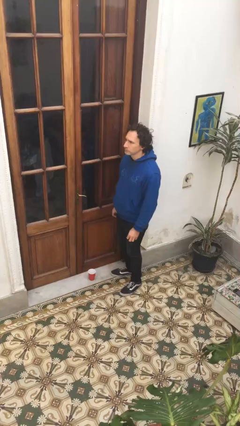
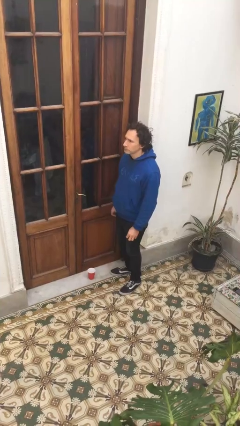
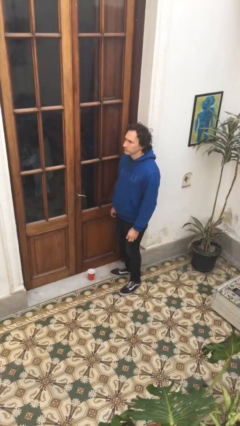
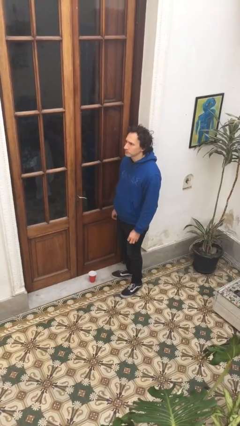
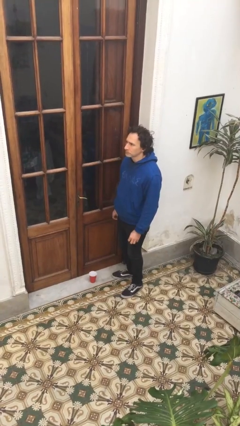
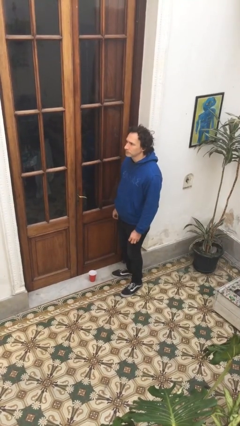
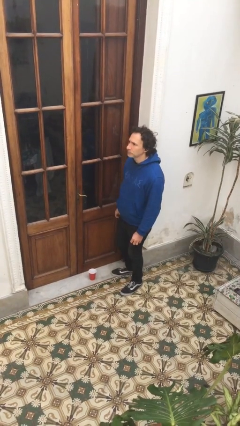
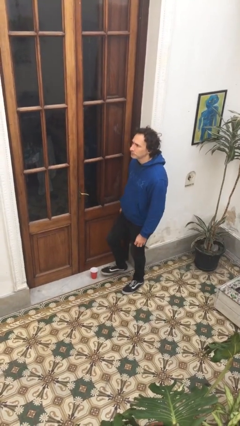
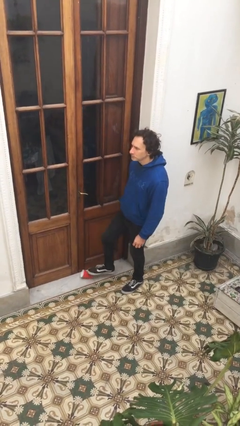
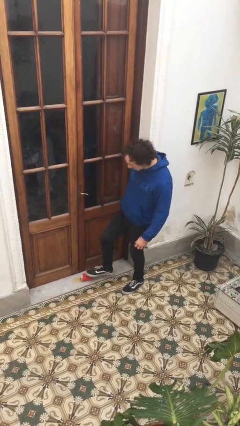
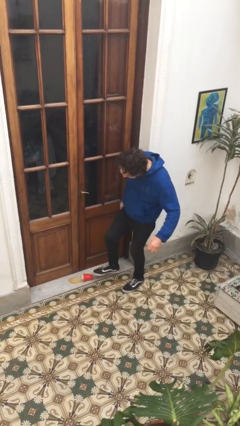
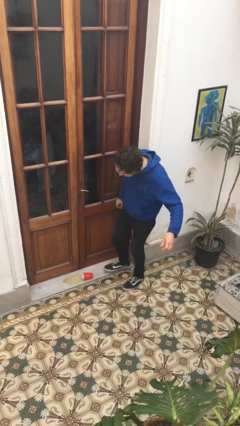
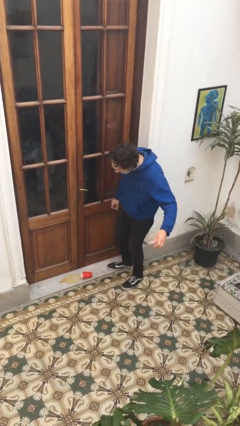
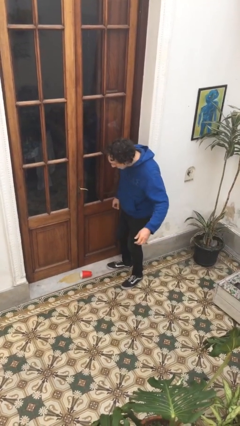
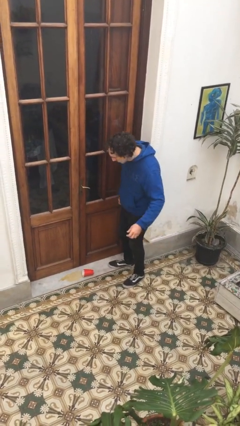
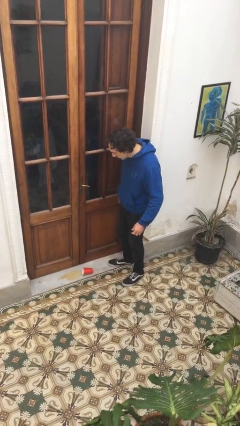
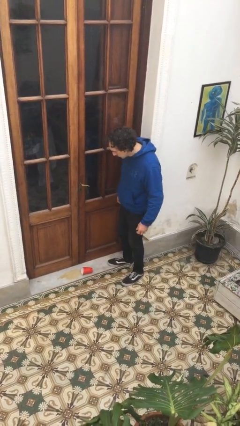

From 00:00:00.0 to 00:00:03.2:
person spills on floor

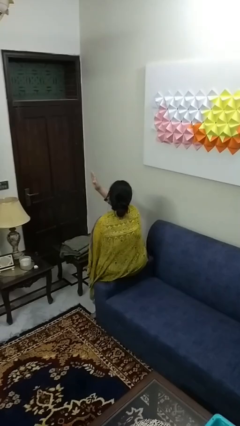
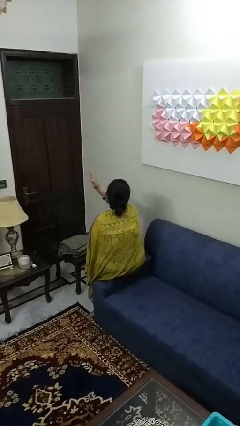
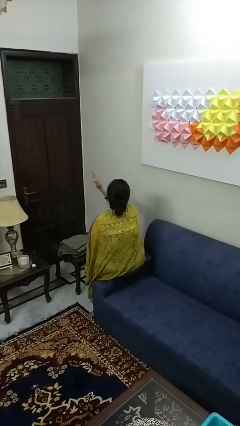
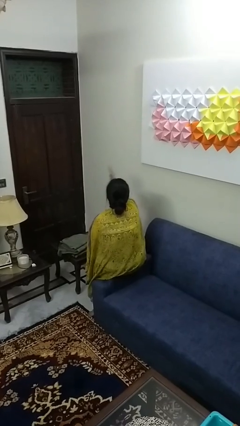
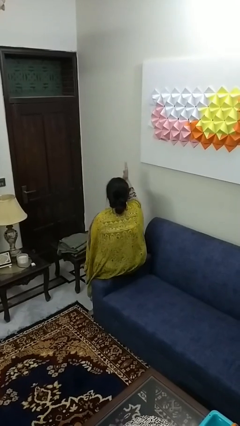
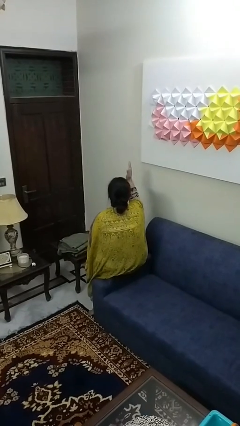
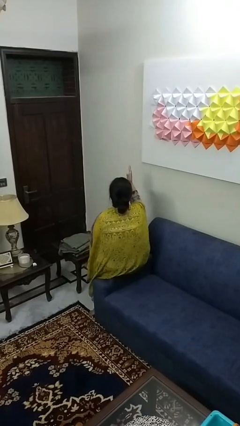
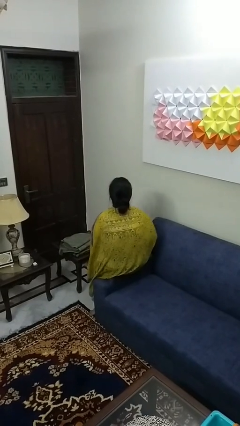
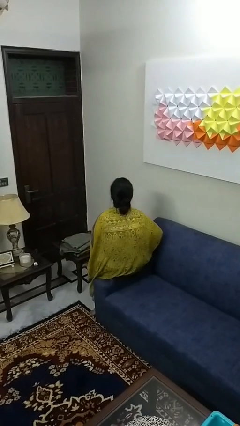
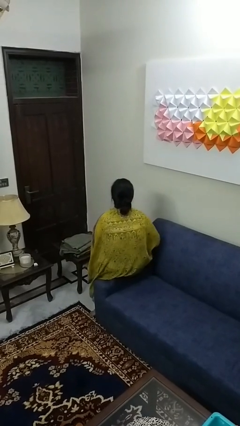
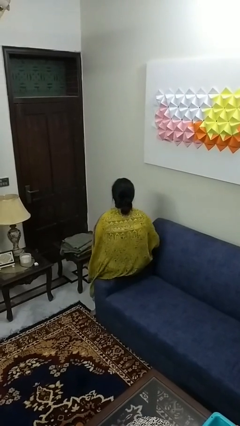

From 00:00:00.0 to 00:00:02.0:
person gestures swipe right

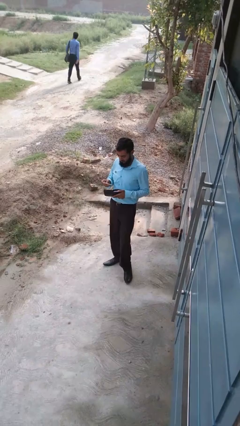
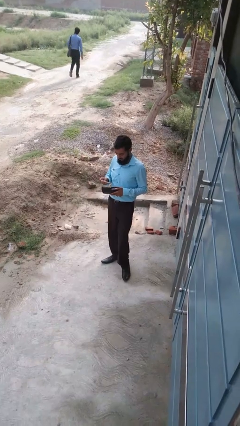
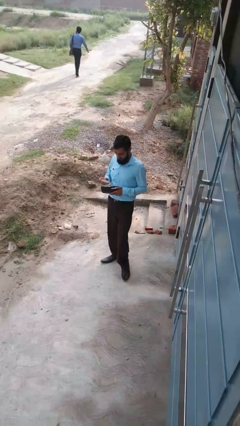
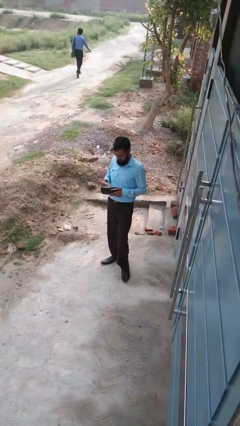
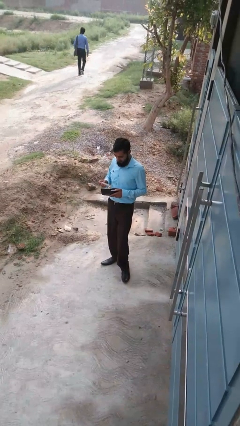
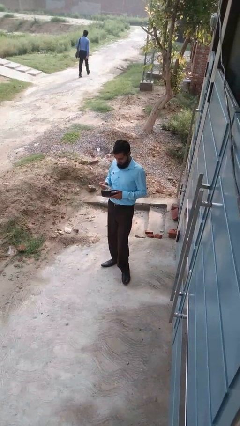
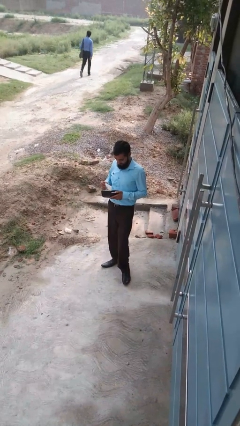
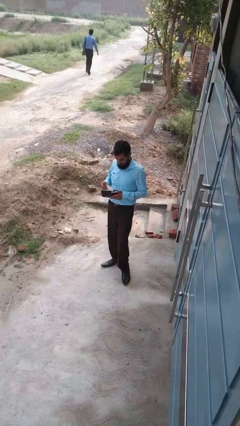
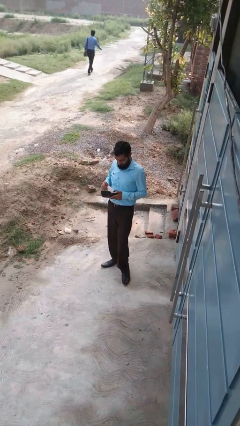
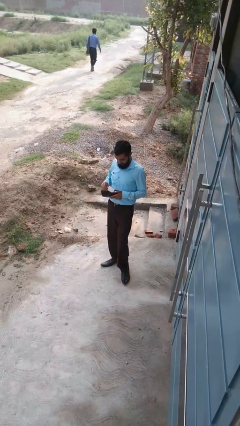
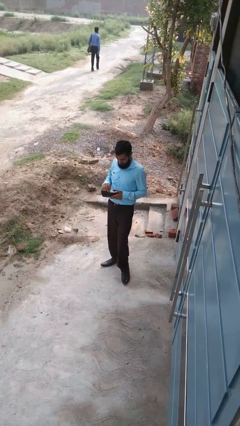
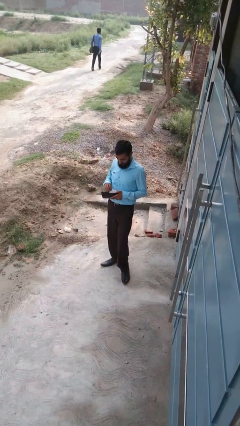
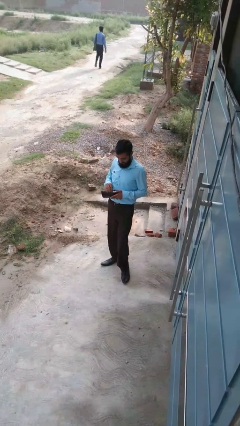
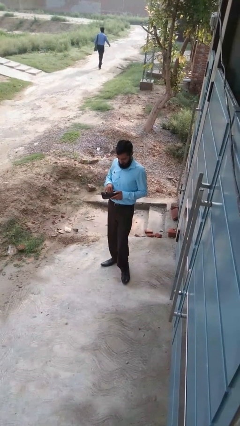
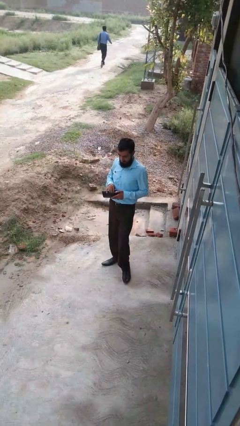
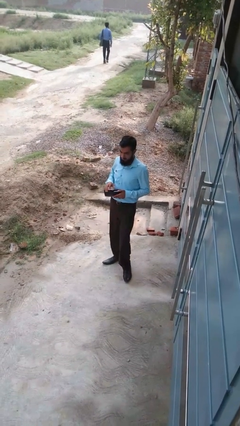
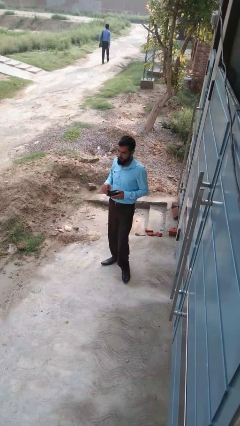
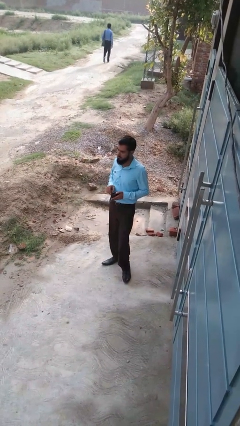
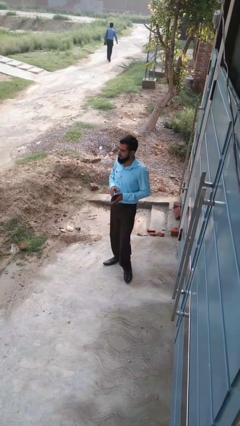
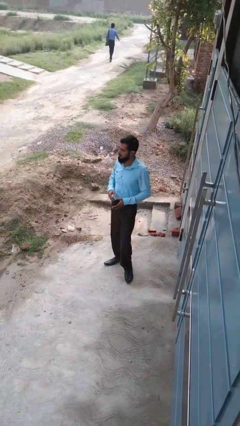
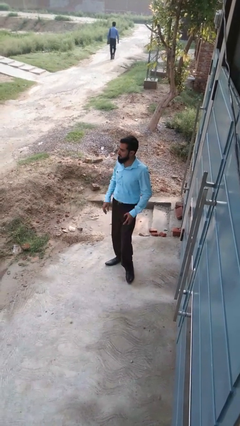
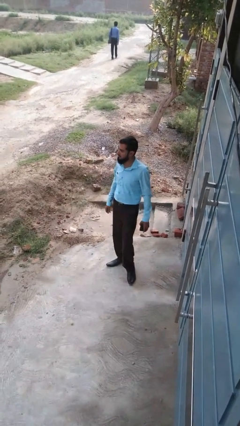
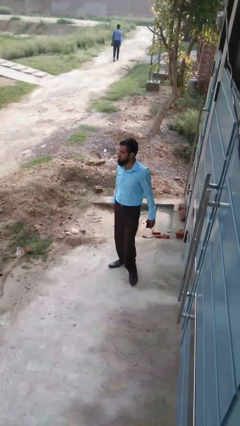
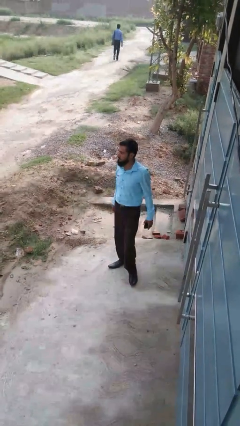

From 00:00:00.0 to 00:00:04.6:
person puts object into purse

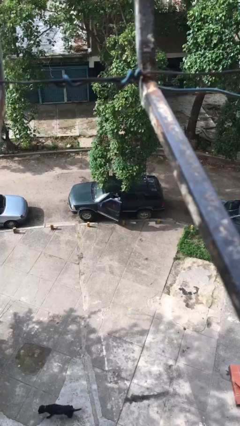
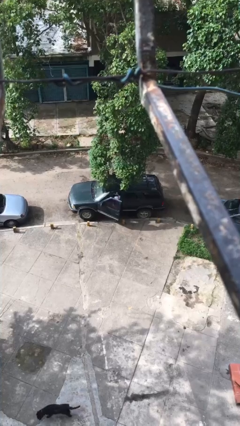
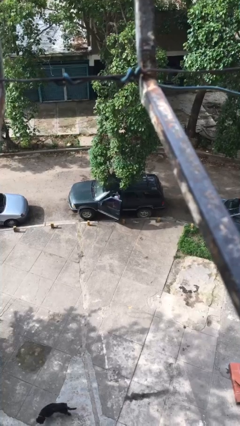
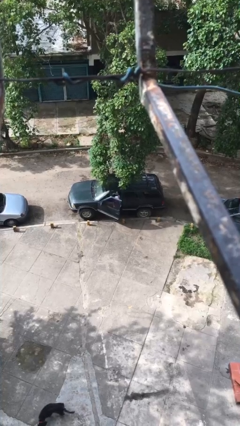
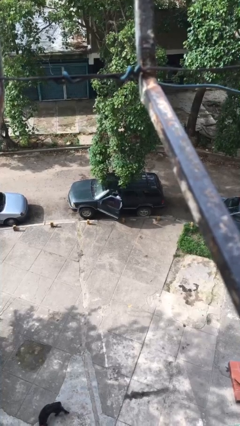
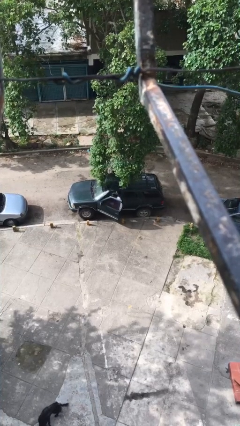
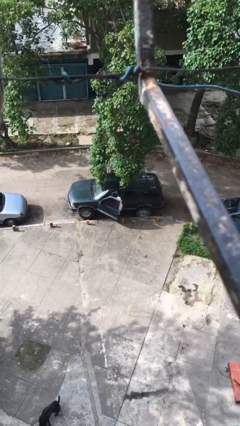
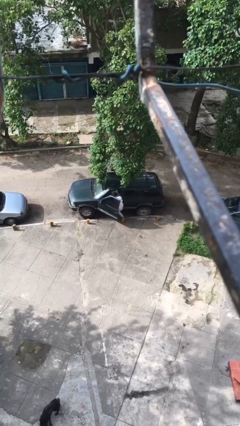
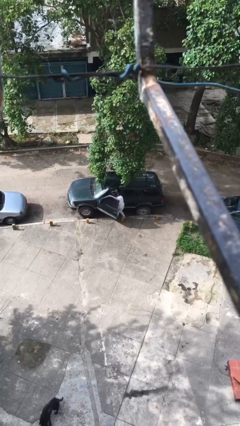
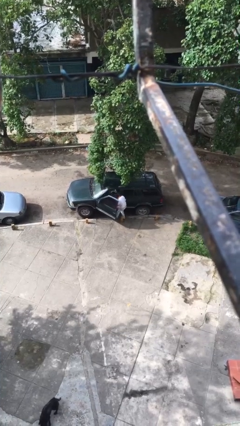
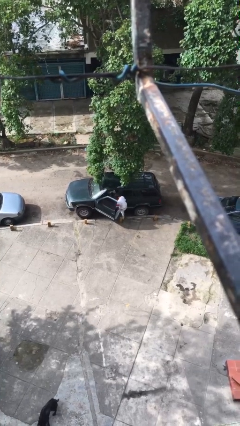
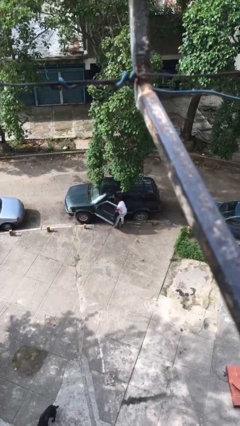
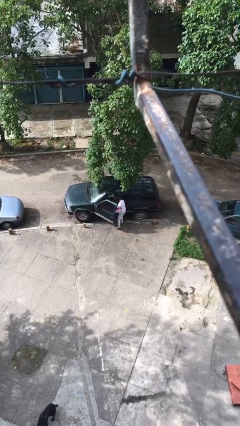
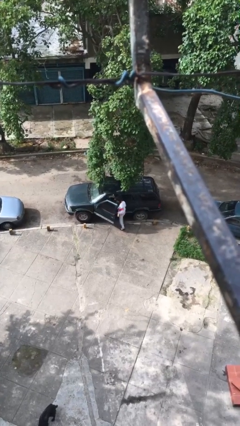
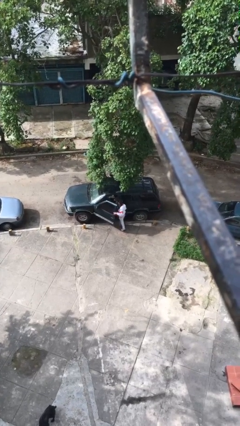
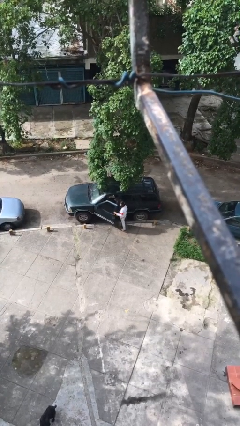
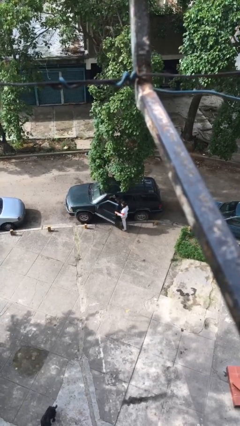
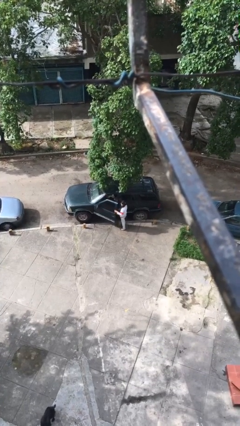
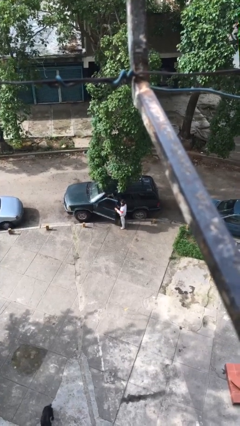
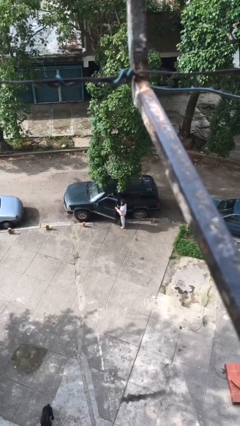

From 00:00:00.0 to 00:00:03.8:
person exits car

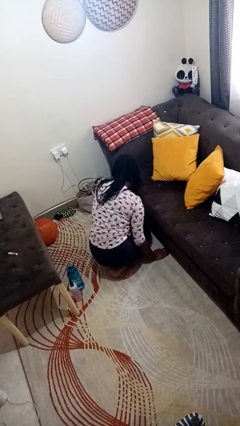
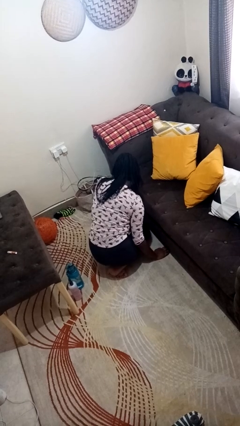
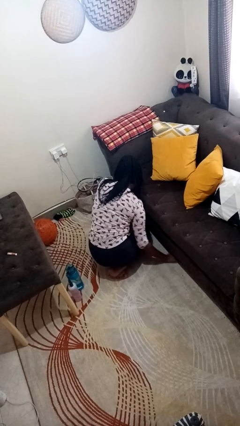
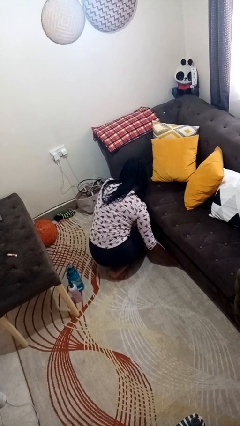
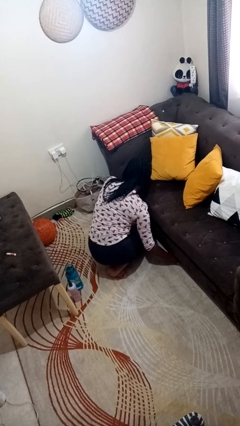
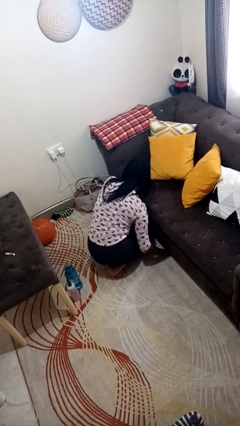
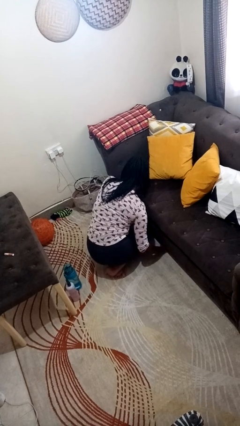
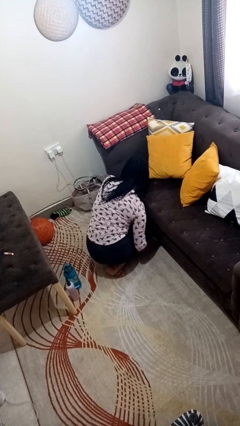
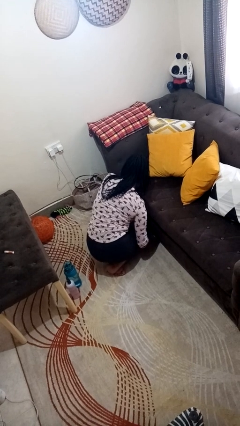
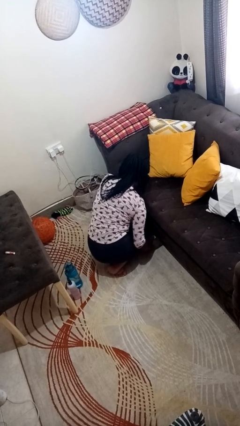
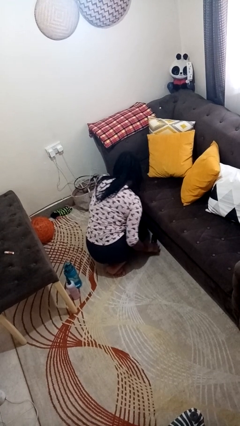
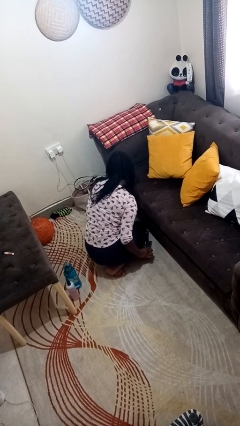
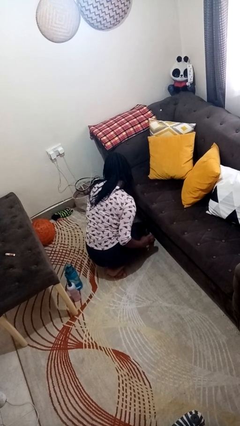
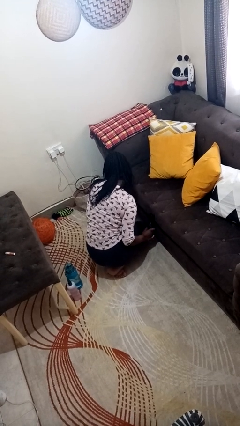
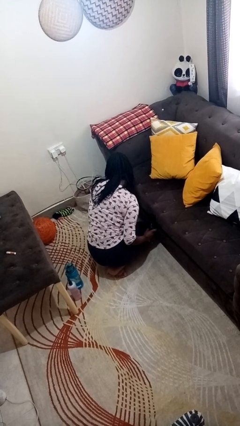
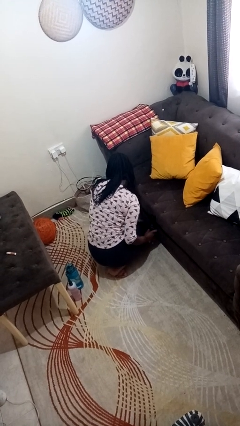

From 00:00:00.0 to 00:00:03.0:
person searches under couch

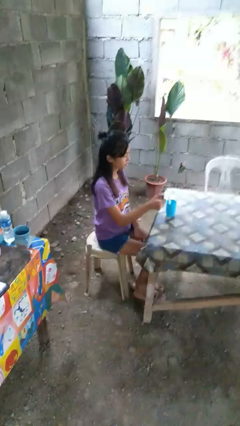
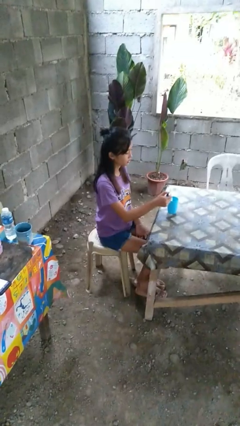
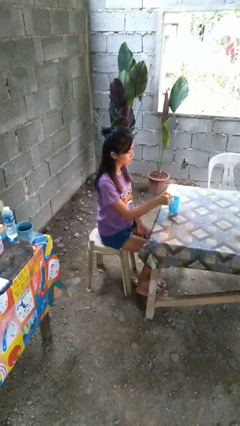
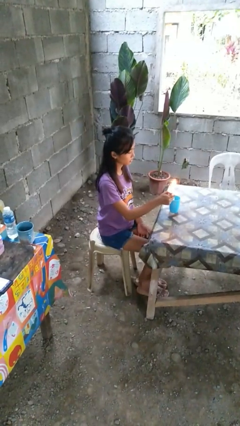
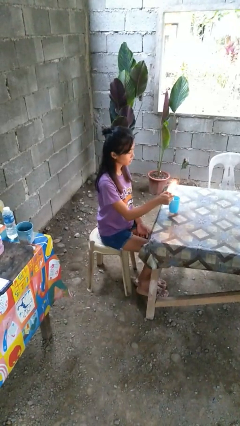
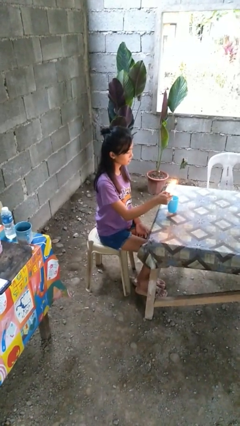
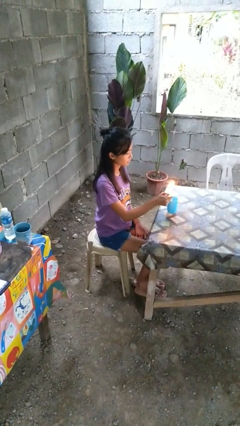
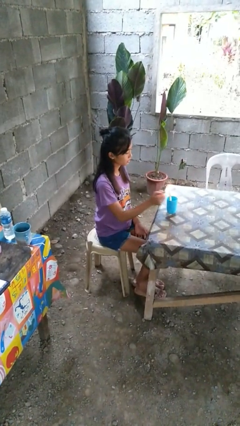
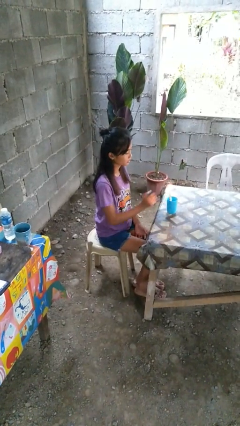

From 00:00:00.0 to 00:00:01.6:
person lights candle
